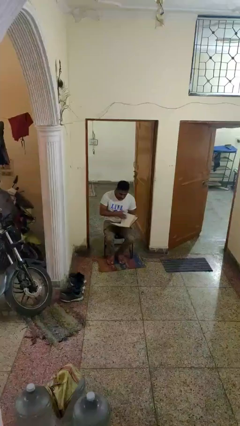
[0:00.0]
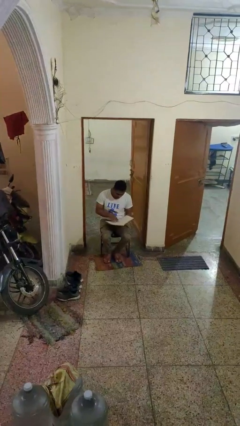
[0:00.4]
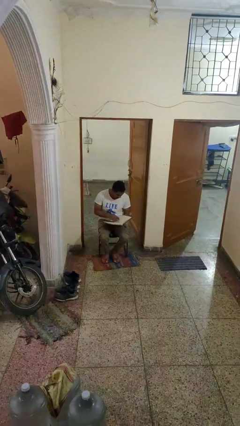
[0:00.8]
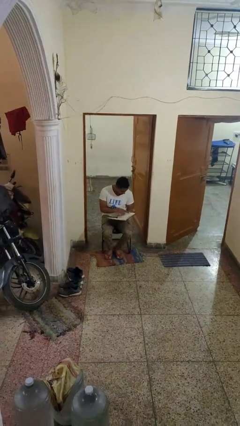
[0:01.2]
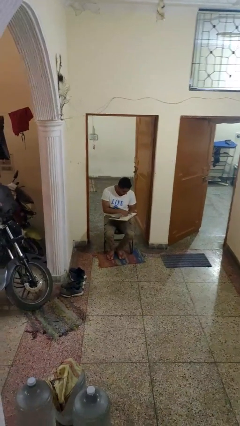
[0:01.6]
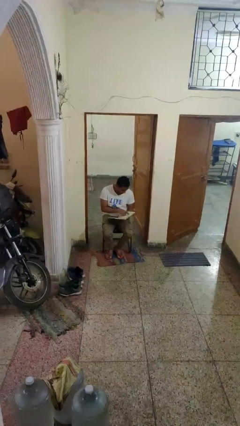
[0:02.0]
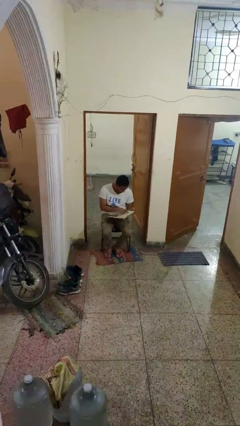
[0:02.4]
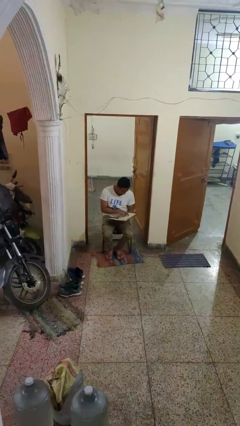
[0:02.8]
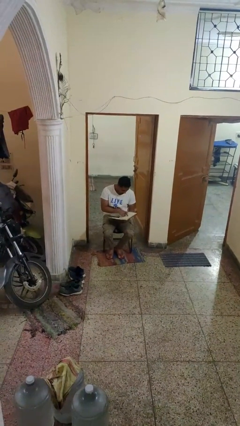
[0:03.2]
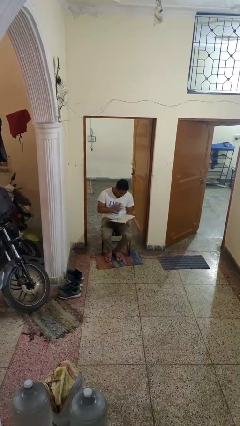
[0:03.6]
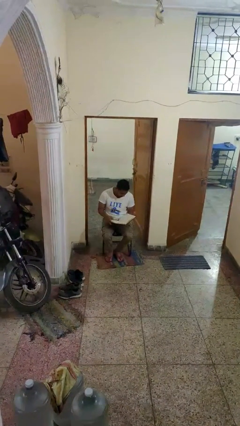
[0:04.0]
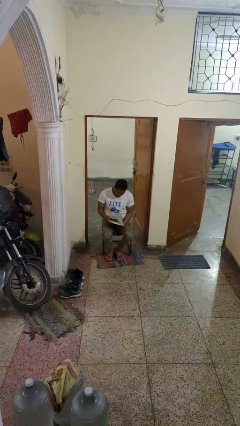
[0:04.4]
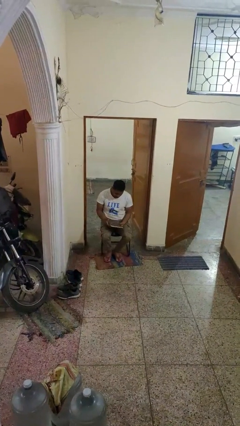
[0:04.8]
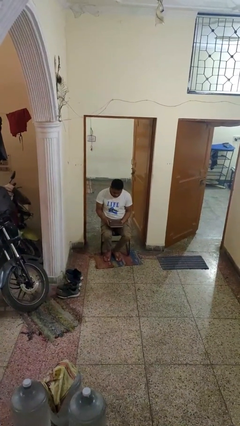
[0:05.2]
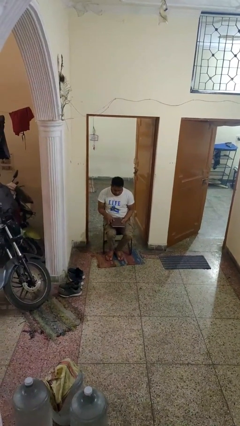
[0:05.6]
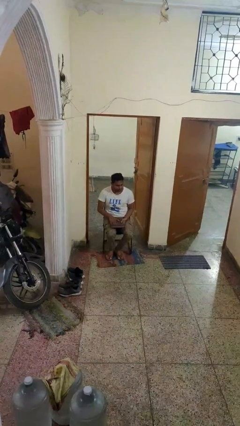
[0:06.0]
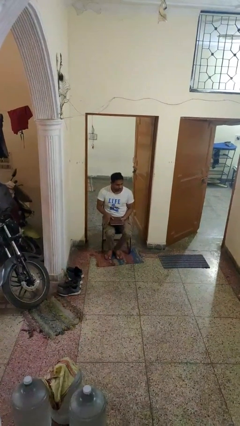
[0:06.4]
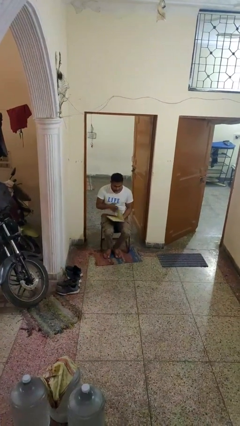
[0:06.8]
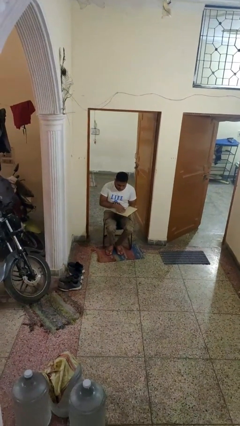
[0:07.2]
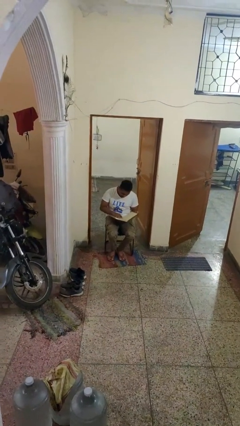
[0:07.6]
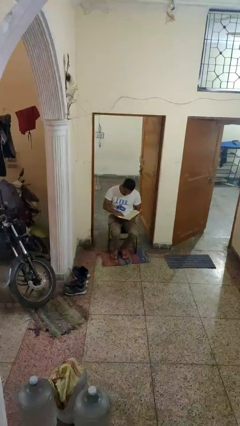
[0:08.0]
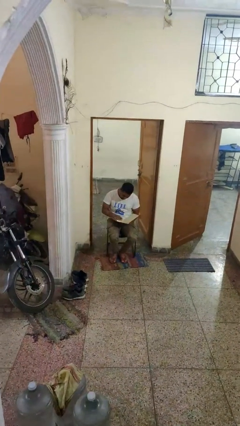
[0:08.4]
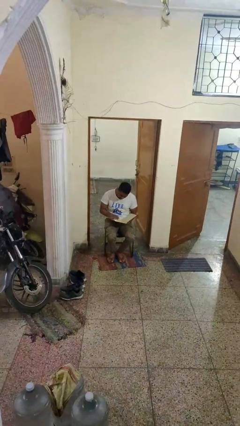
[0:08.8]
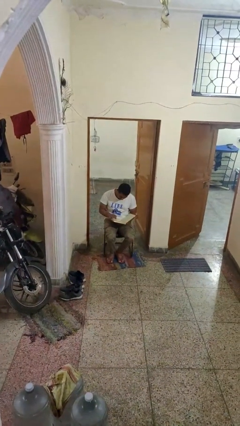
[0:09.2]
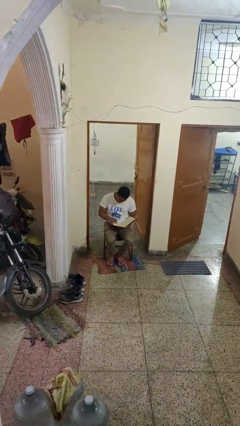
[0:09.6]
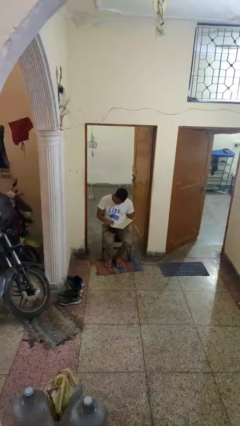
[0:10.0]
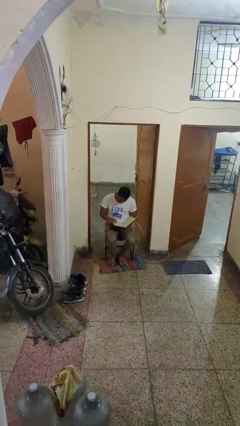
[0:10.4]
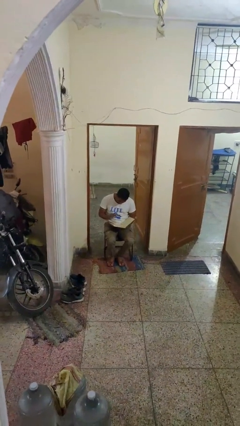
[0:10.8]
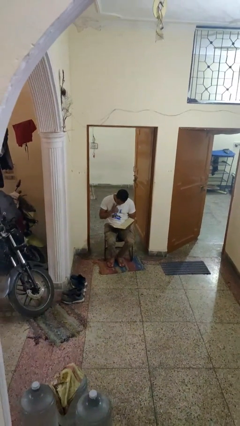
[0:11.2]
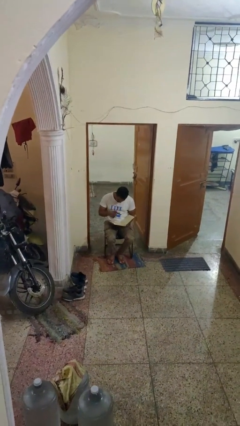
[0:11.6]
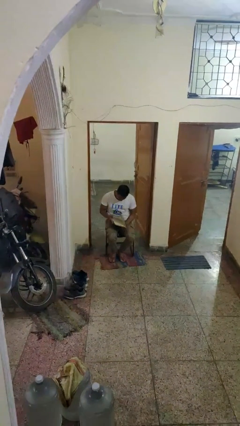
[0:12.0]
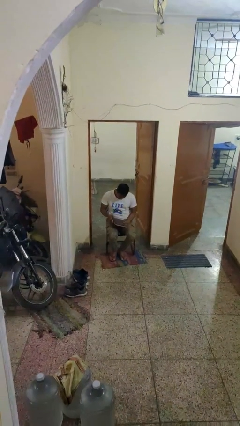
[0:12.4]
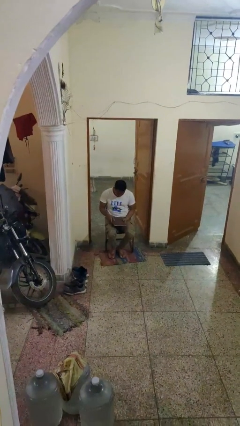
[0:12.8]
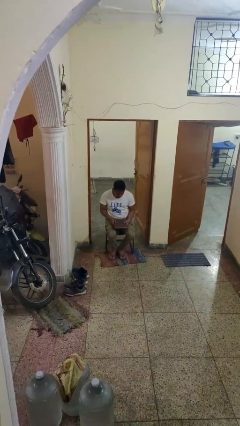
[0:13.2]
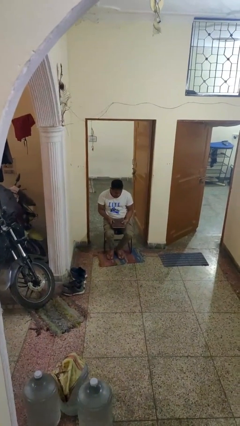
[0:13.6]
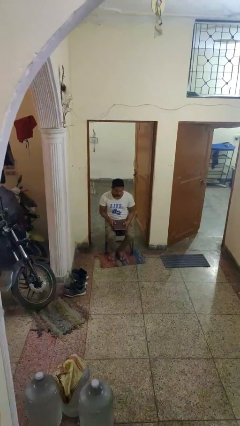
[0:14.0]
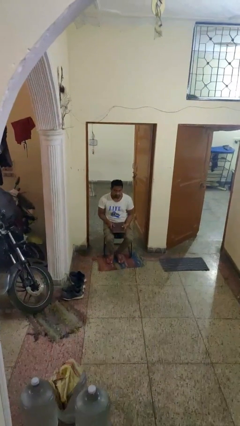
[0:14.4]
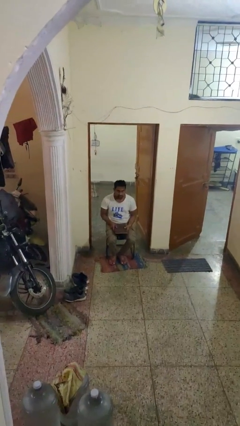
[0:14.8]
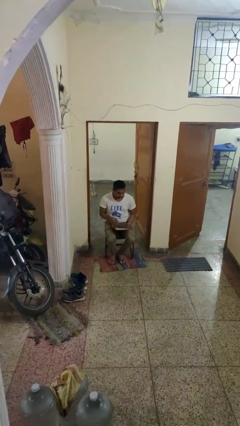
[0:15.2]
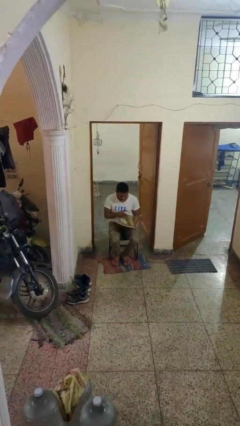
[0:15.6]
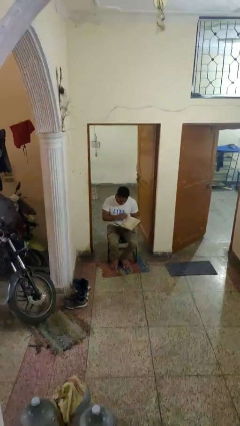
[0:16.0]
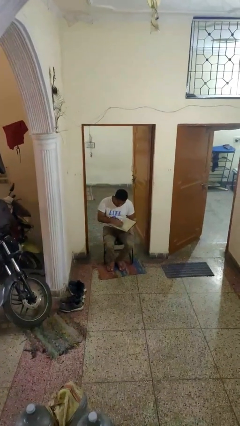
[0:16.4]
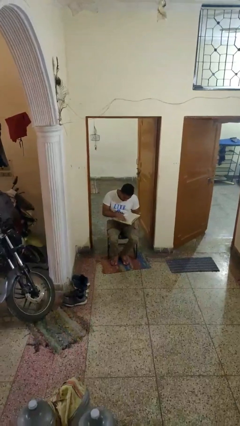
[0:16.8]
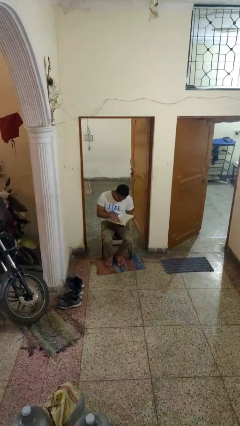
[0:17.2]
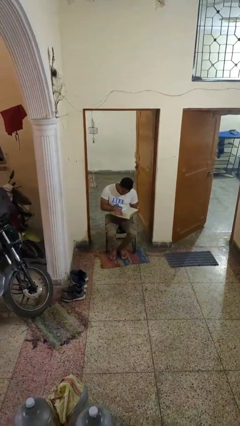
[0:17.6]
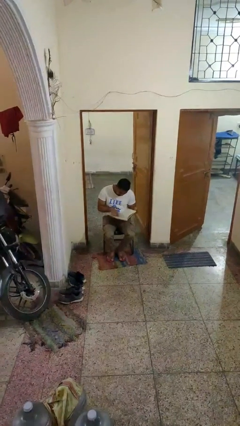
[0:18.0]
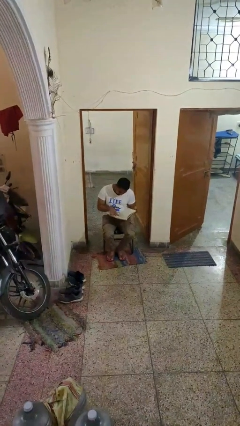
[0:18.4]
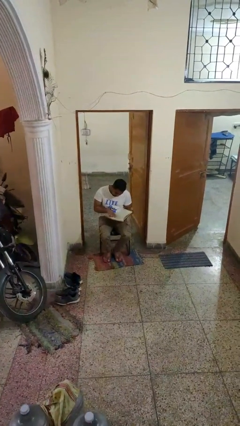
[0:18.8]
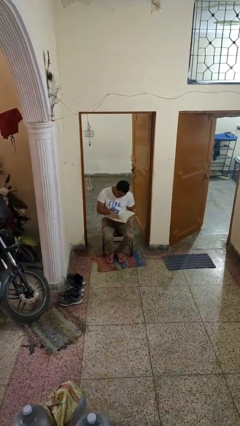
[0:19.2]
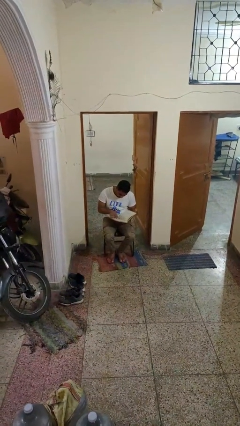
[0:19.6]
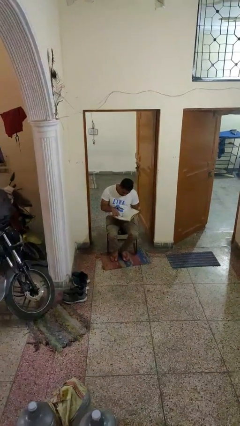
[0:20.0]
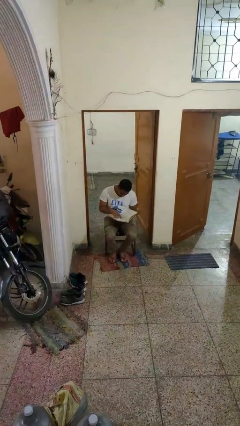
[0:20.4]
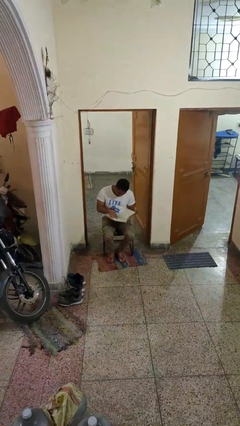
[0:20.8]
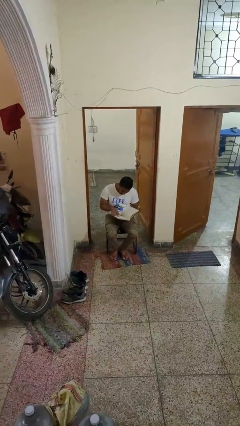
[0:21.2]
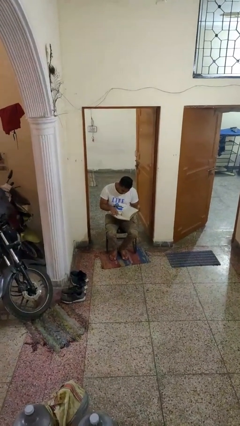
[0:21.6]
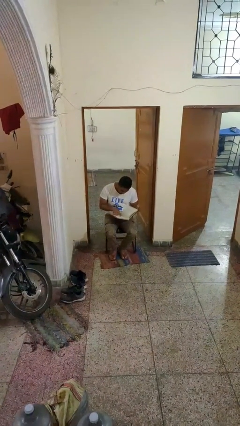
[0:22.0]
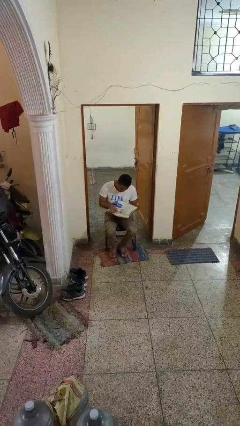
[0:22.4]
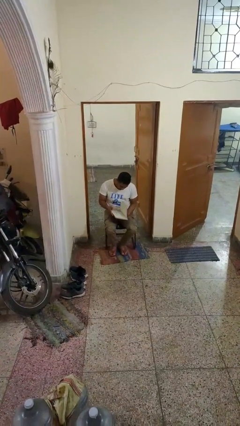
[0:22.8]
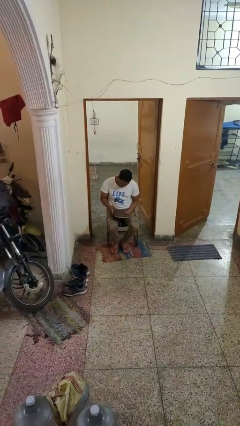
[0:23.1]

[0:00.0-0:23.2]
person reads document

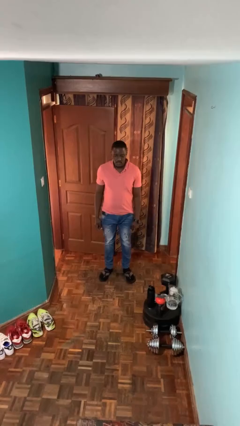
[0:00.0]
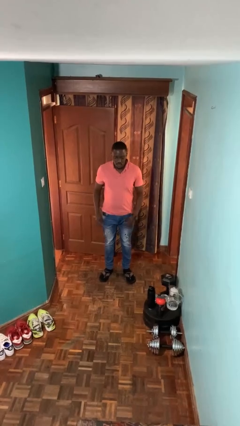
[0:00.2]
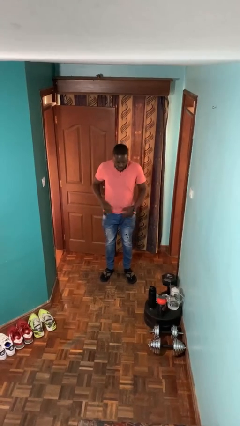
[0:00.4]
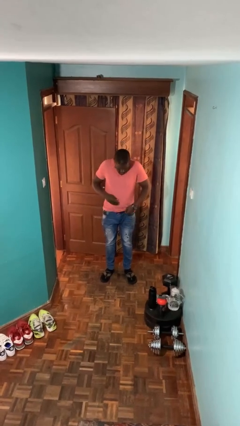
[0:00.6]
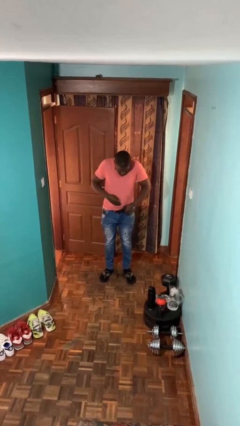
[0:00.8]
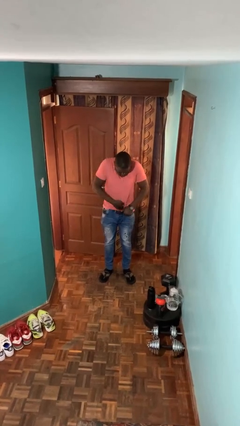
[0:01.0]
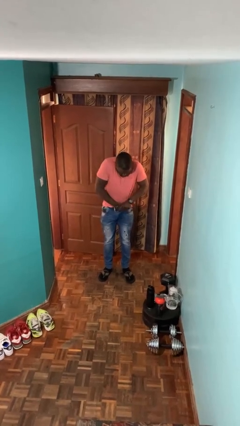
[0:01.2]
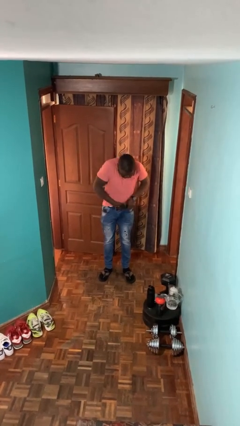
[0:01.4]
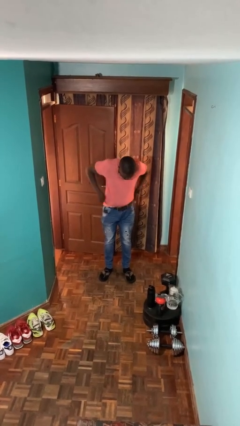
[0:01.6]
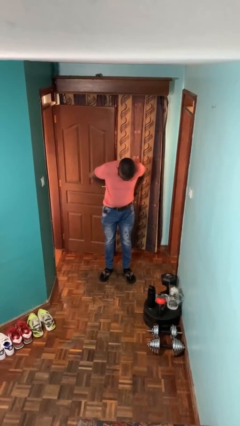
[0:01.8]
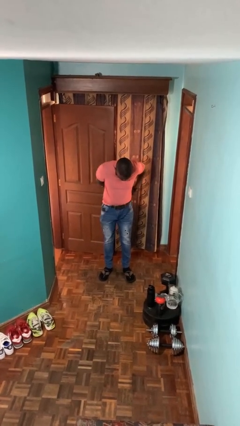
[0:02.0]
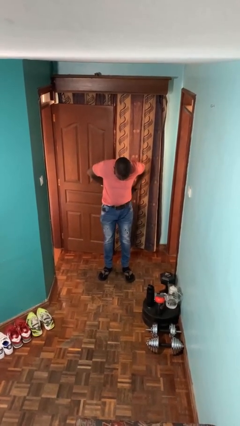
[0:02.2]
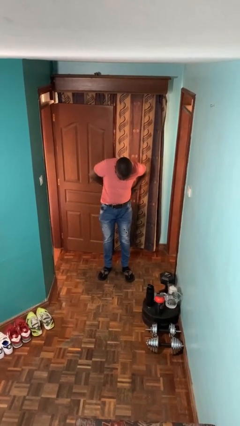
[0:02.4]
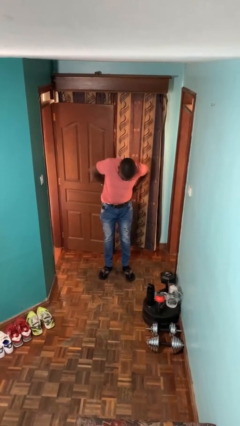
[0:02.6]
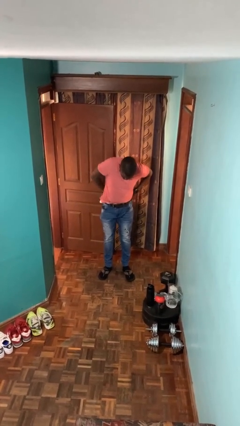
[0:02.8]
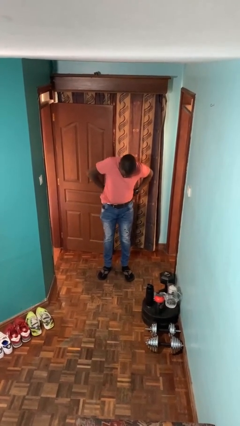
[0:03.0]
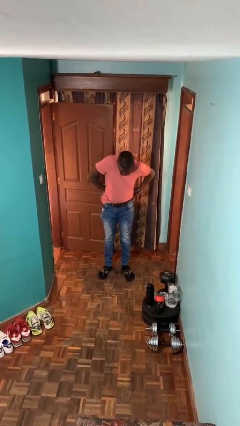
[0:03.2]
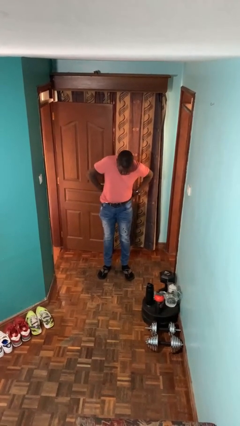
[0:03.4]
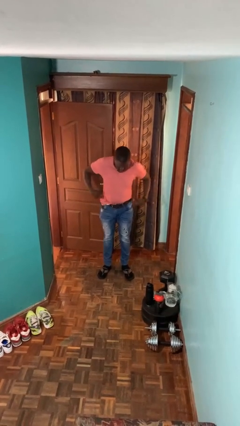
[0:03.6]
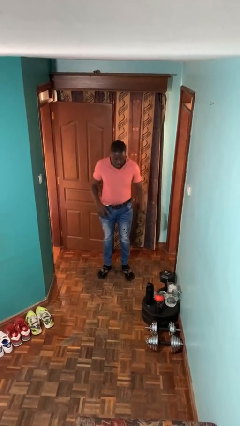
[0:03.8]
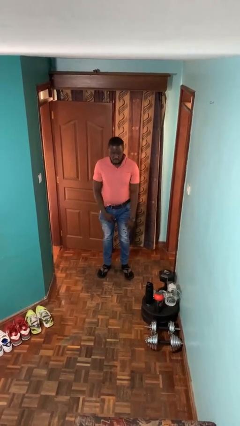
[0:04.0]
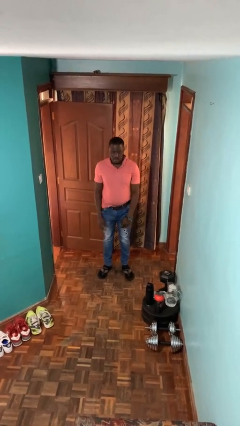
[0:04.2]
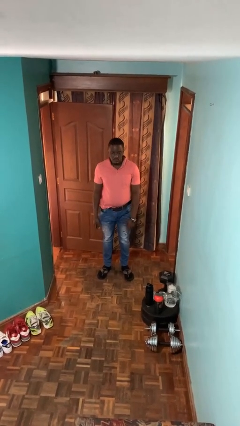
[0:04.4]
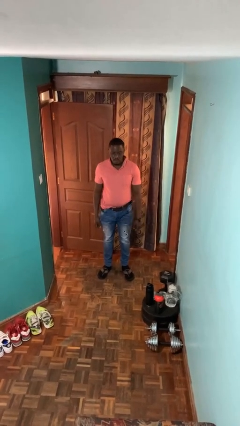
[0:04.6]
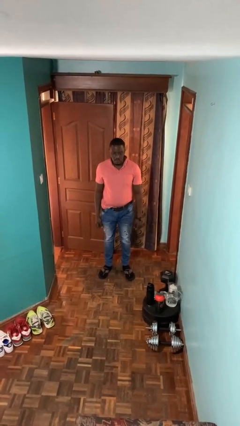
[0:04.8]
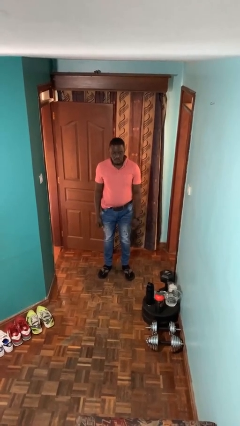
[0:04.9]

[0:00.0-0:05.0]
person tucks in shirt

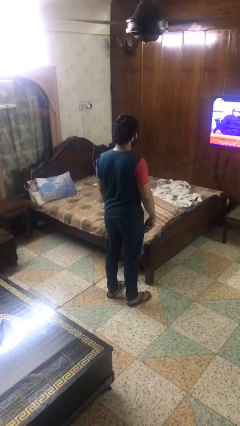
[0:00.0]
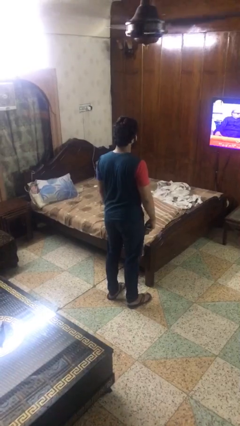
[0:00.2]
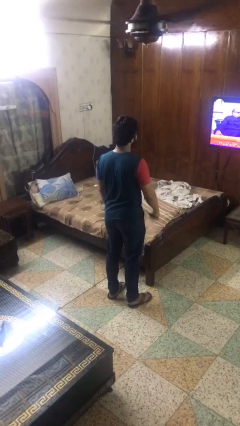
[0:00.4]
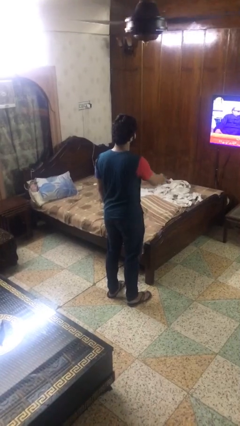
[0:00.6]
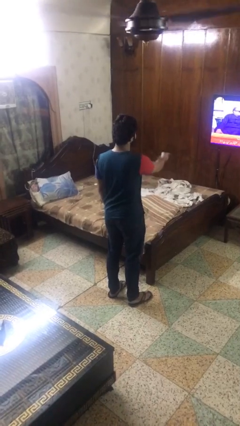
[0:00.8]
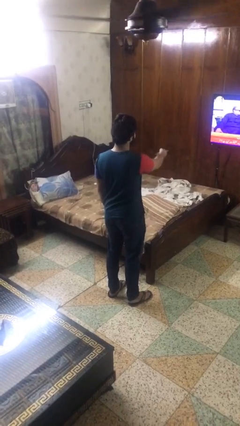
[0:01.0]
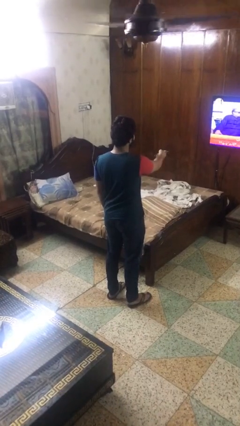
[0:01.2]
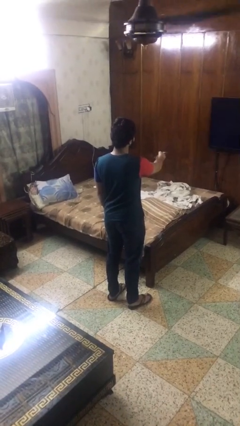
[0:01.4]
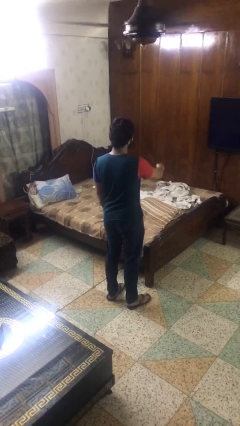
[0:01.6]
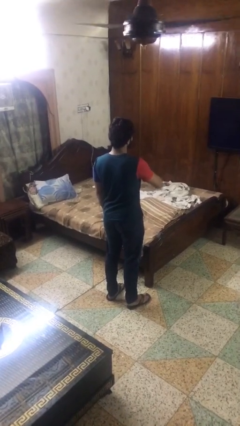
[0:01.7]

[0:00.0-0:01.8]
person uses television remote
